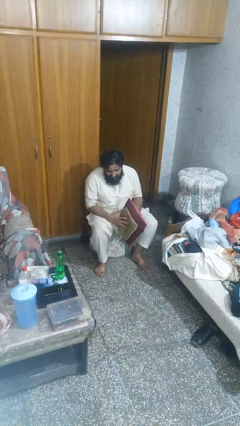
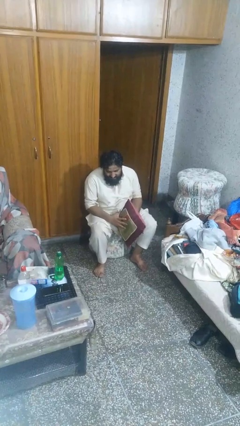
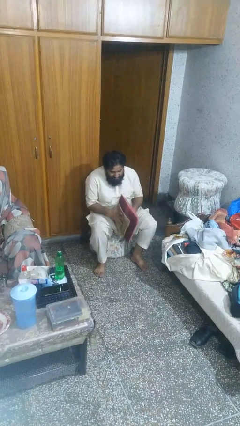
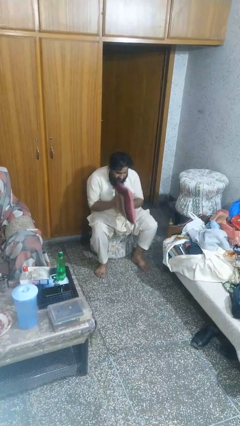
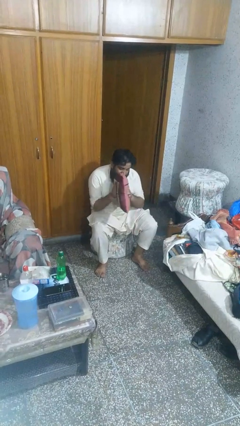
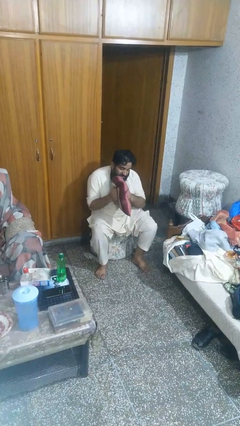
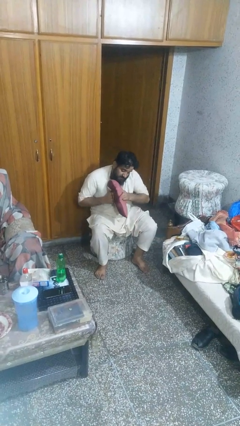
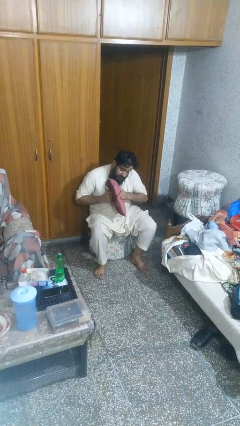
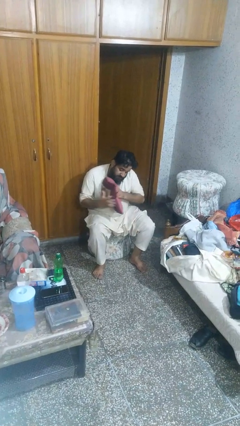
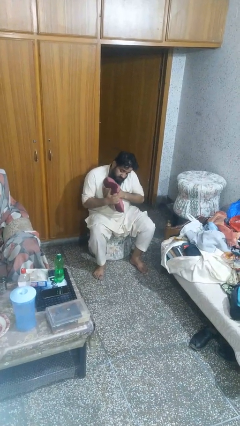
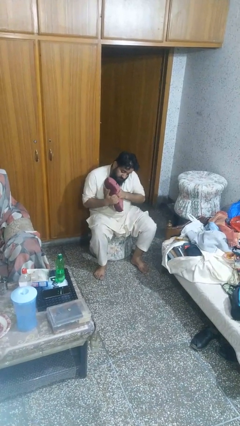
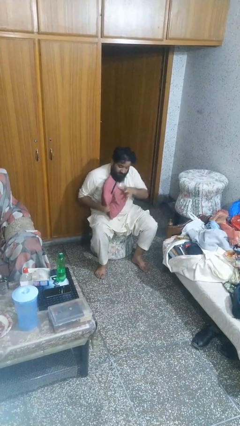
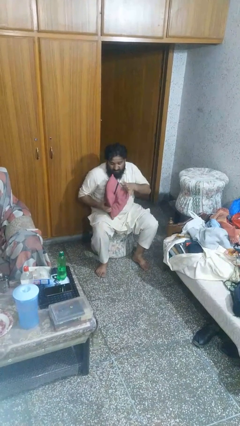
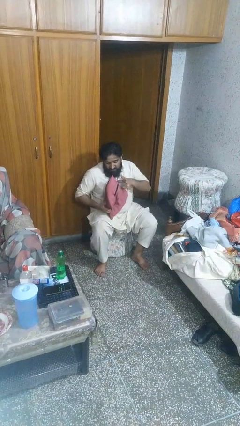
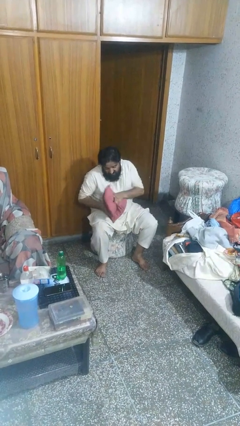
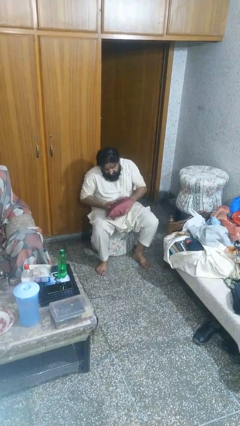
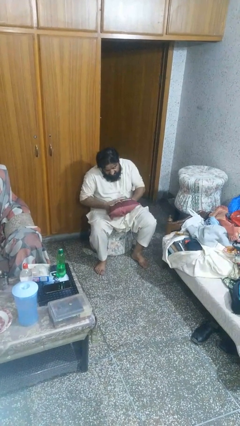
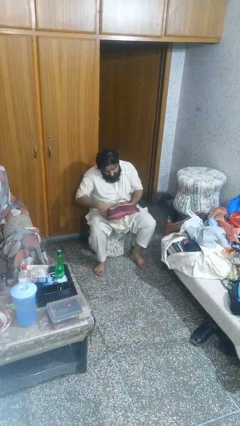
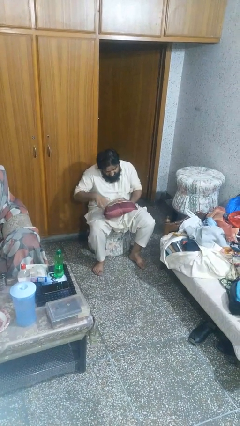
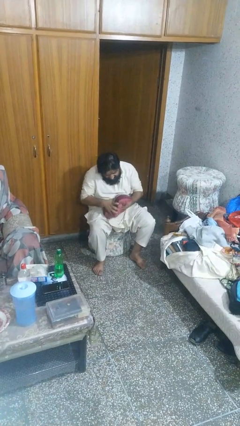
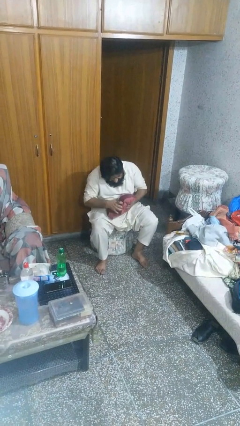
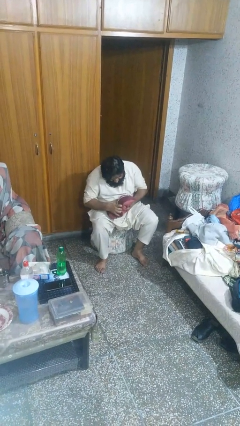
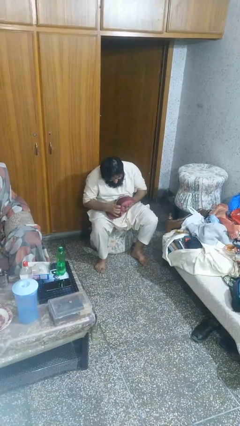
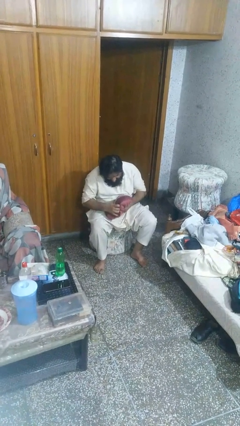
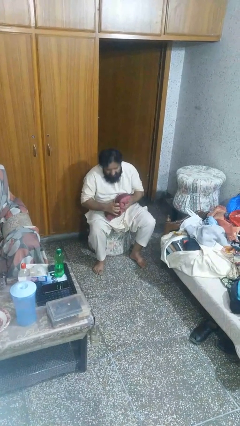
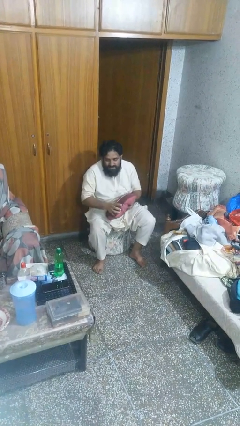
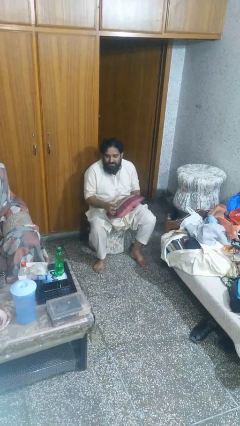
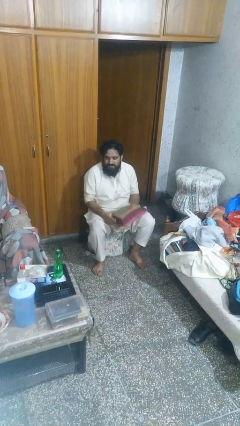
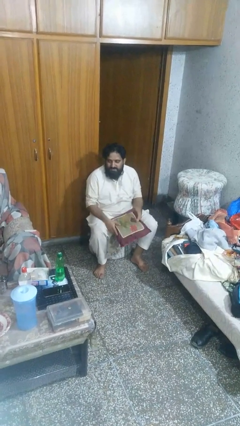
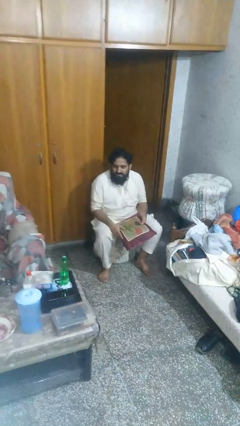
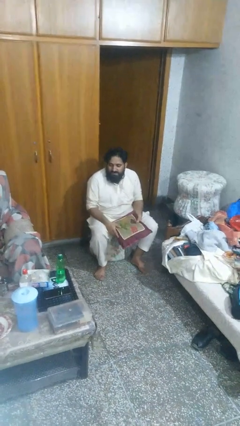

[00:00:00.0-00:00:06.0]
person squeezes object

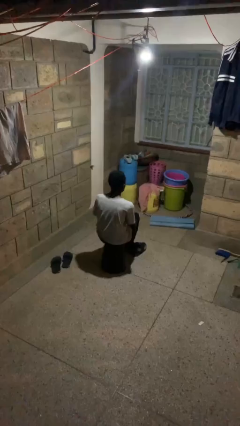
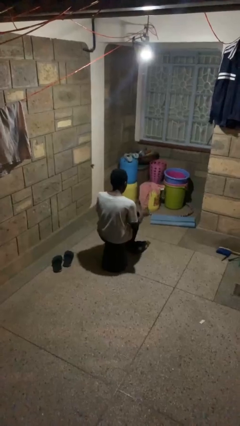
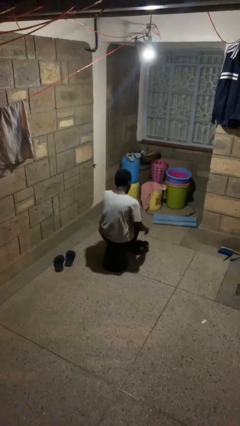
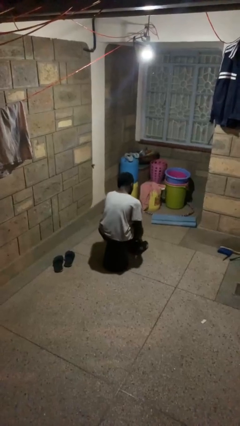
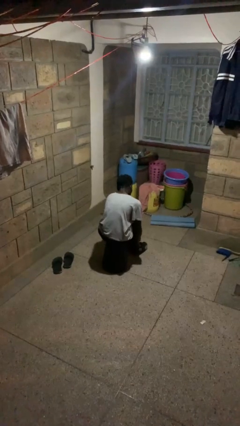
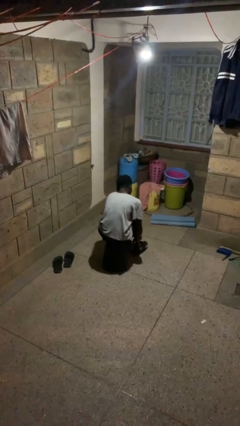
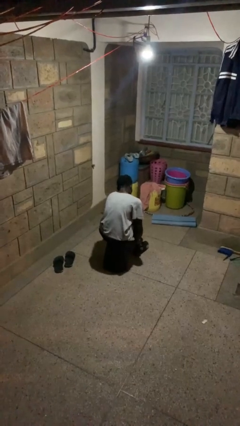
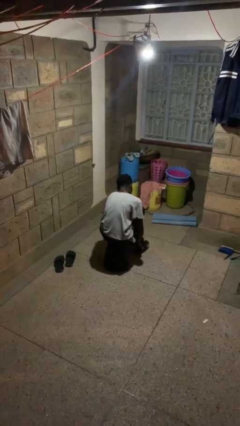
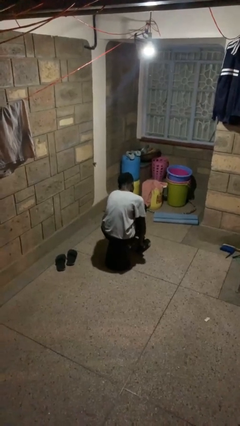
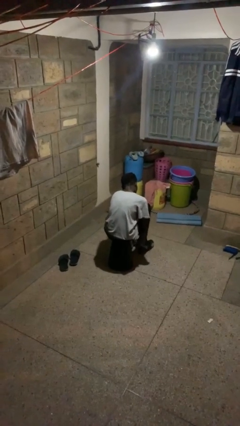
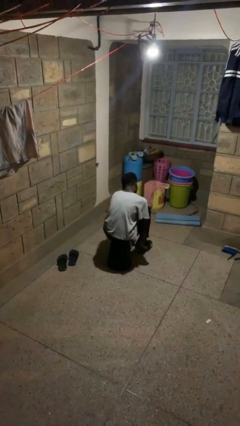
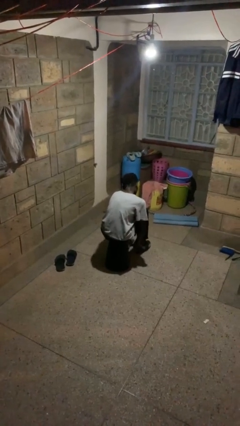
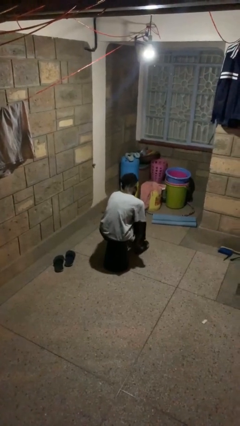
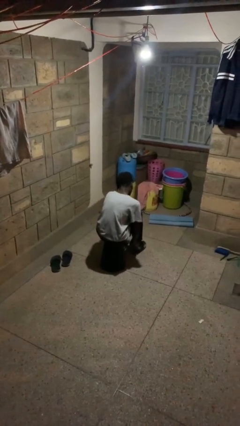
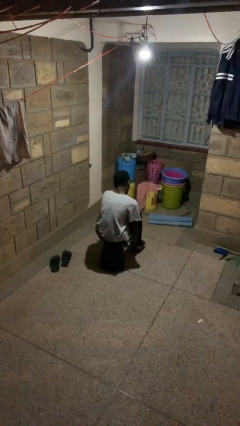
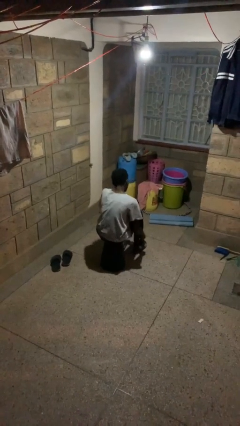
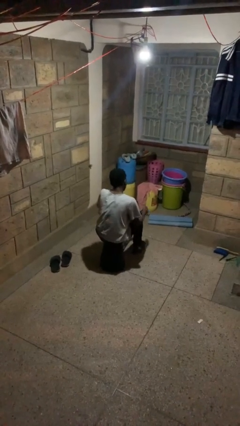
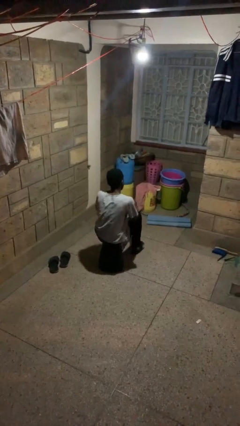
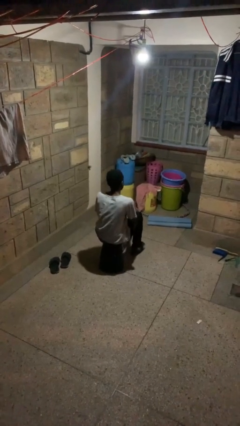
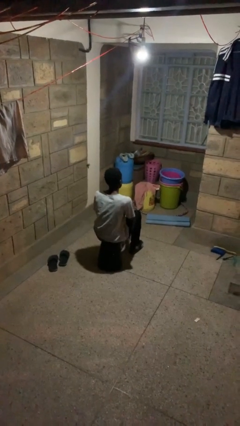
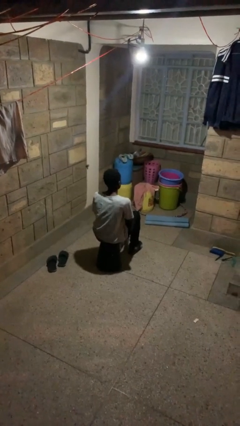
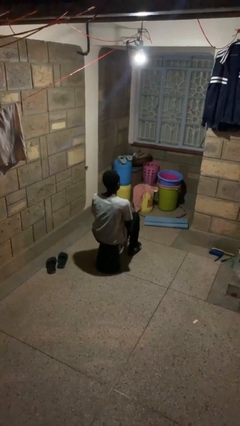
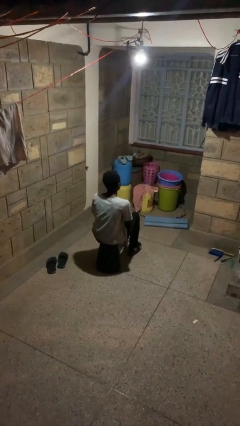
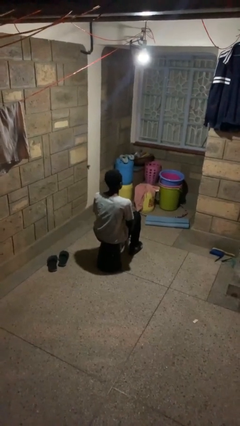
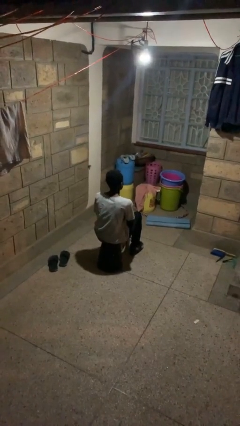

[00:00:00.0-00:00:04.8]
person puts on shoes

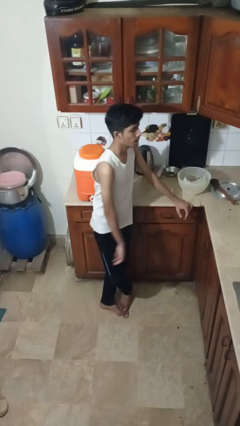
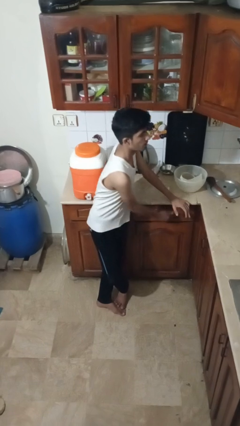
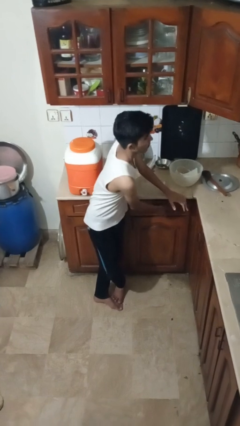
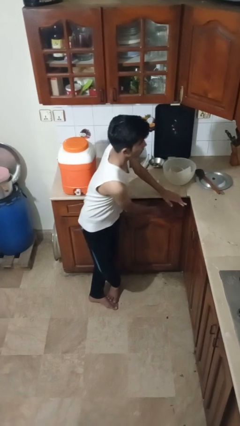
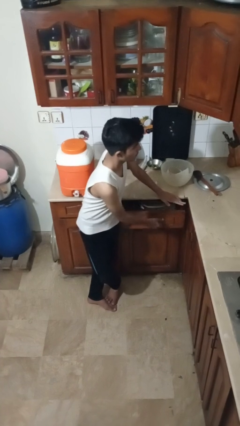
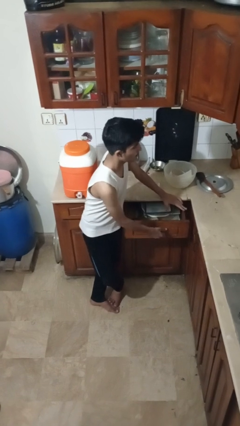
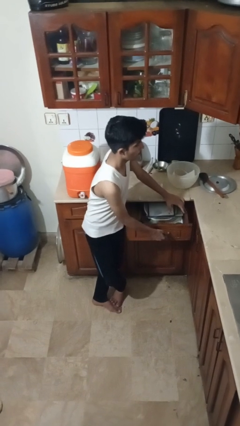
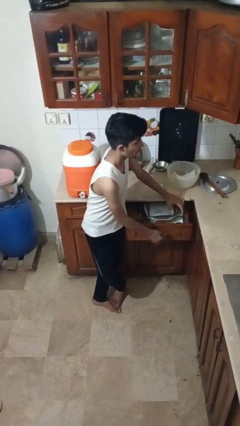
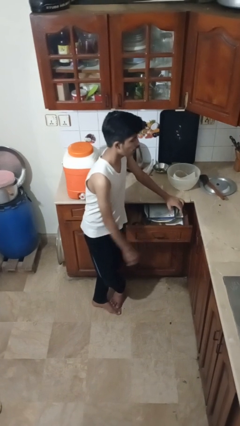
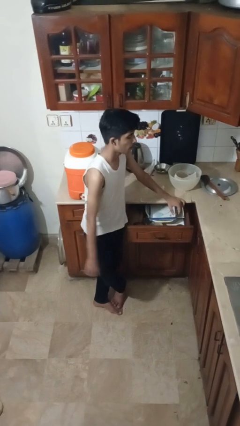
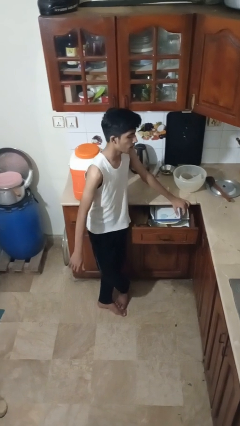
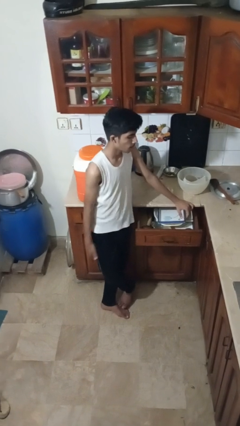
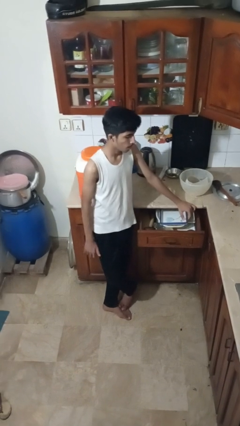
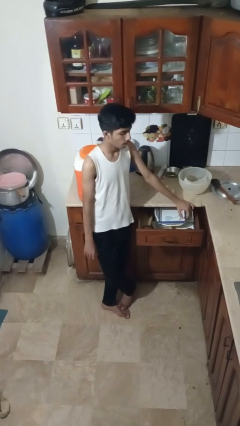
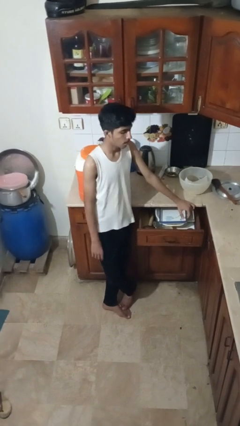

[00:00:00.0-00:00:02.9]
person opens kitchen drawer

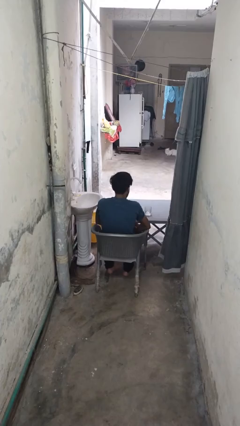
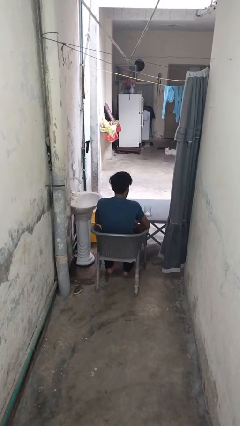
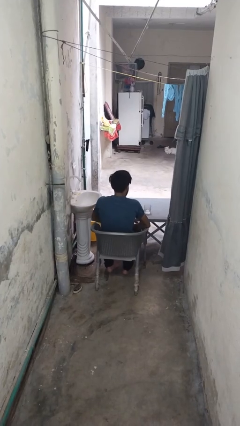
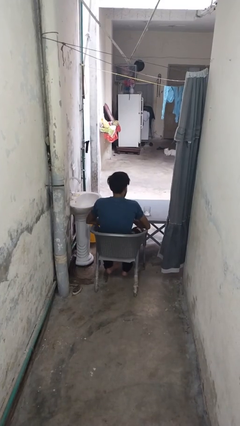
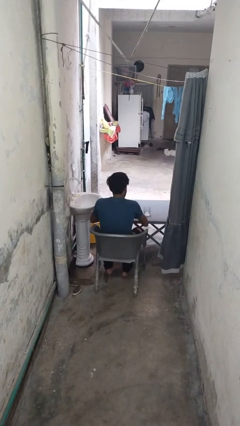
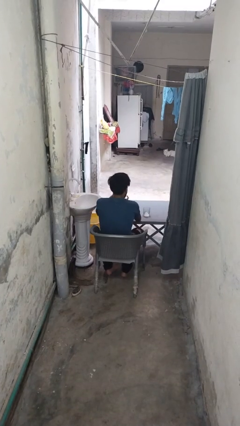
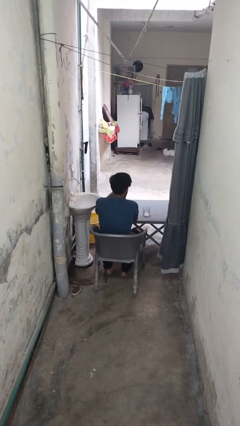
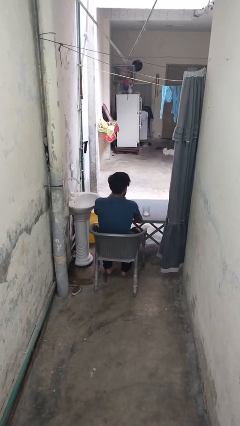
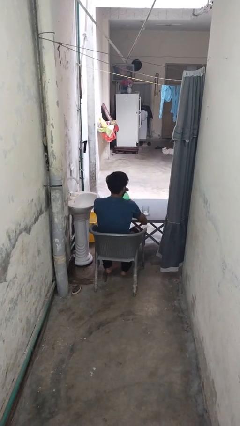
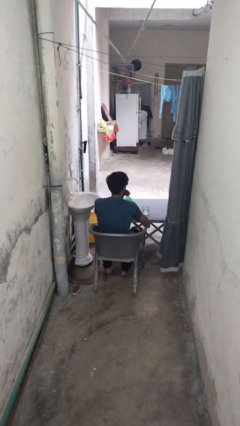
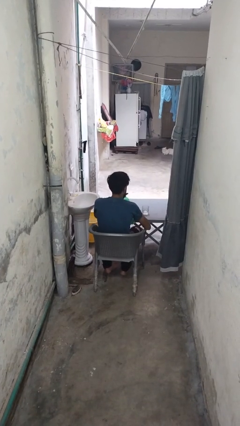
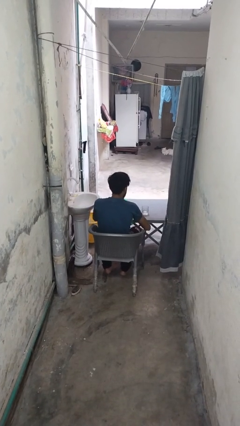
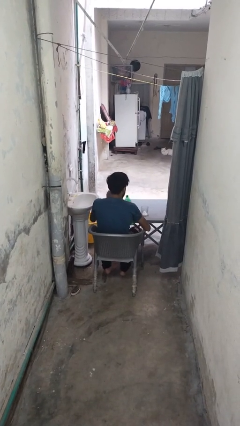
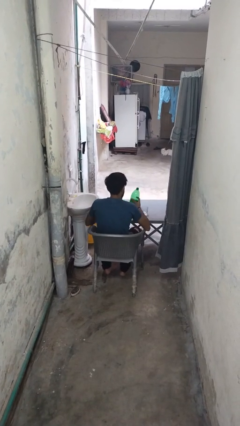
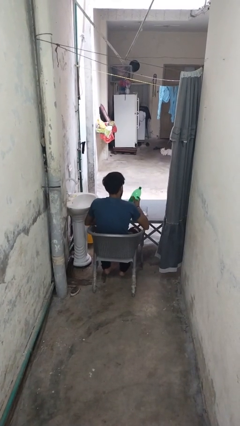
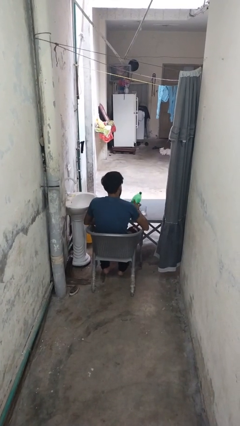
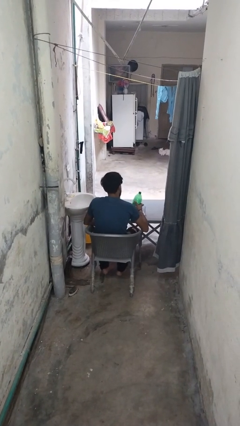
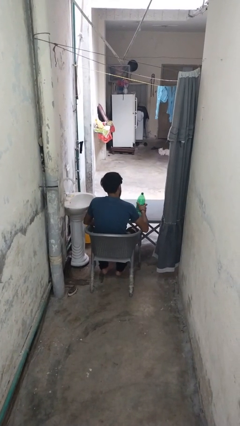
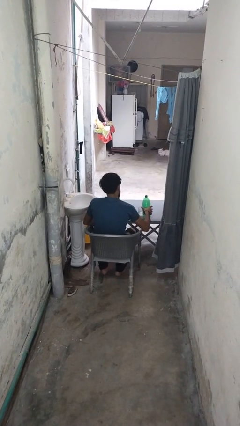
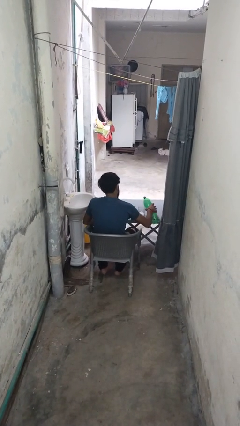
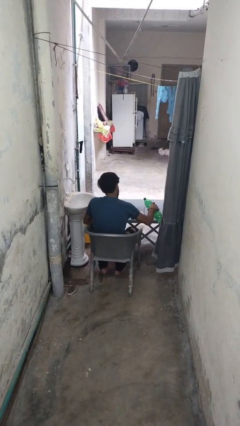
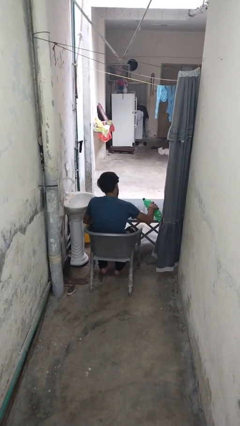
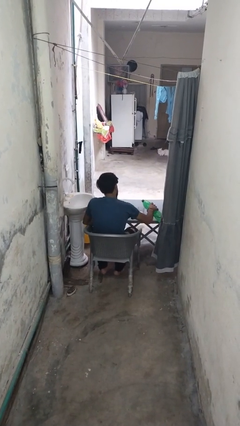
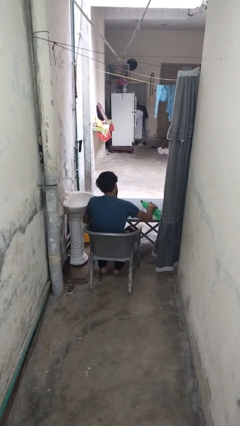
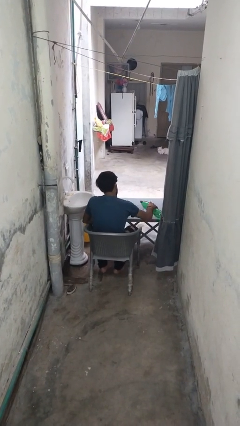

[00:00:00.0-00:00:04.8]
person unscrews lid from bottle
